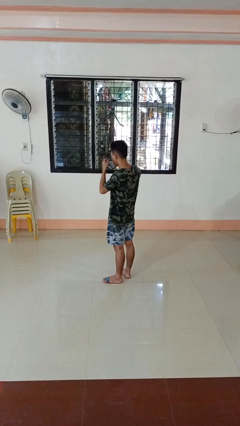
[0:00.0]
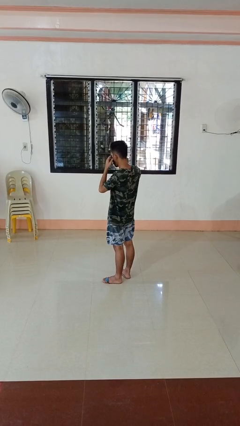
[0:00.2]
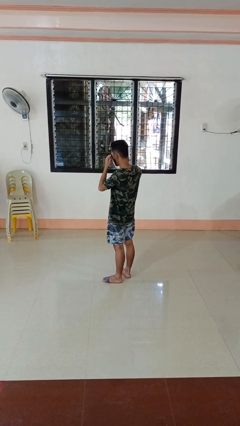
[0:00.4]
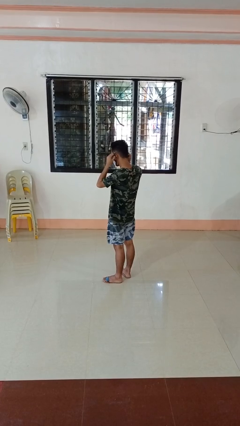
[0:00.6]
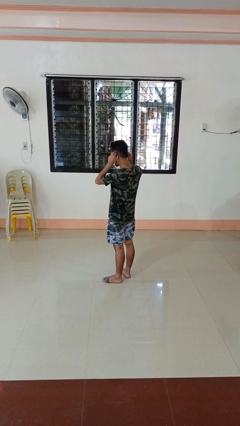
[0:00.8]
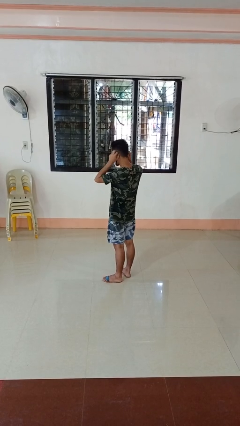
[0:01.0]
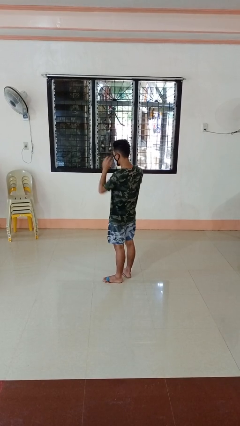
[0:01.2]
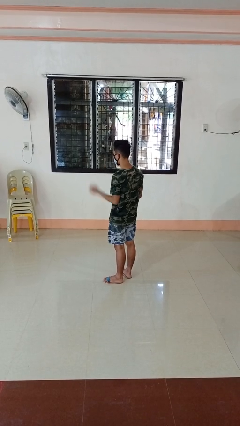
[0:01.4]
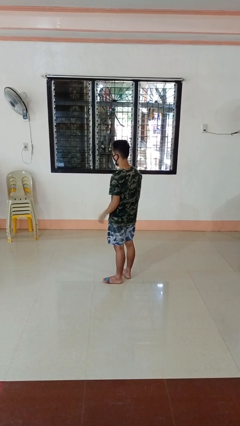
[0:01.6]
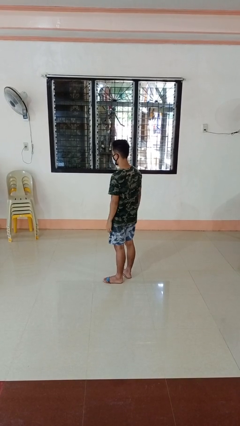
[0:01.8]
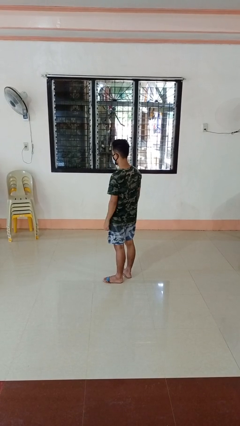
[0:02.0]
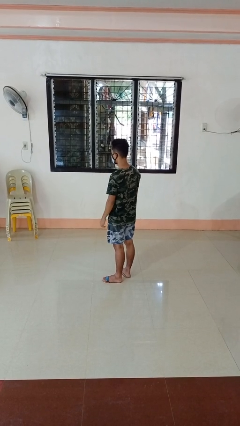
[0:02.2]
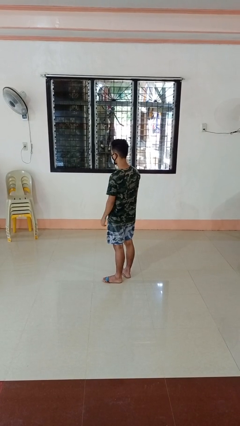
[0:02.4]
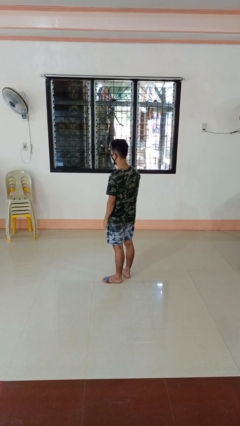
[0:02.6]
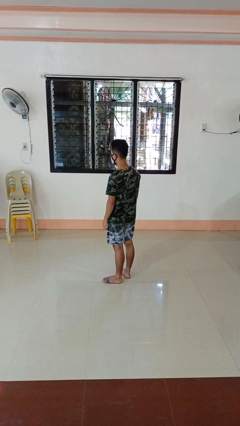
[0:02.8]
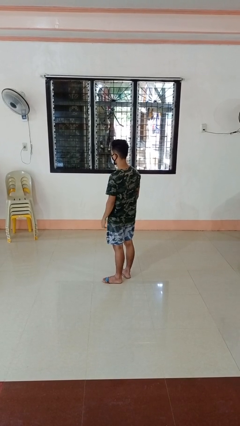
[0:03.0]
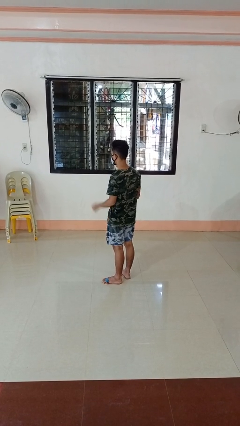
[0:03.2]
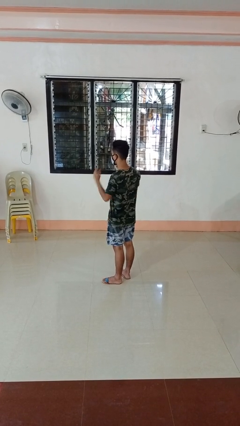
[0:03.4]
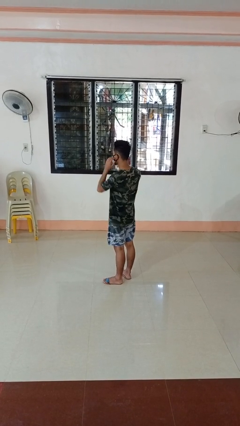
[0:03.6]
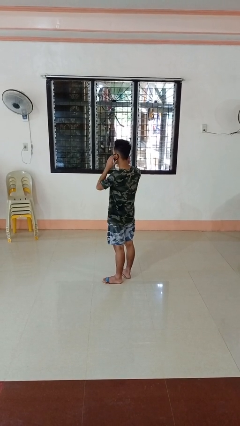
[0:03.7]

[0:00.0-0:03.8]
person puts on facemask

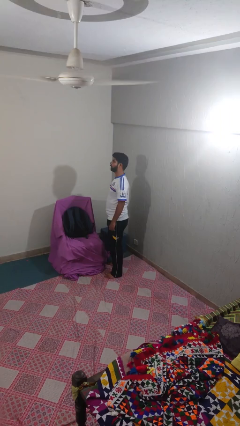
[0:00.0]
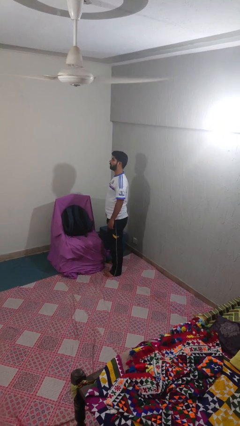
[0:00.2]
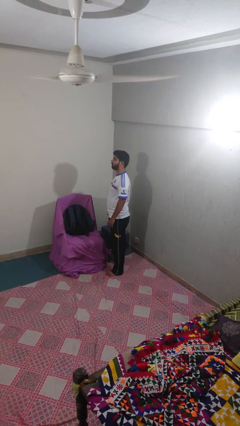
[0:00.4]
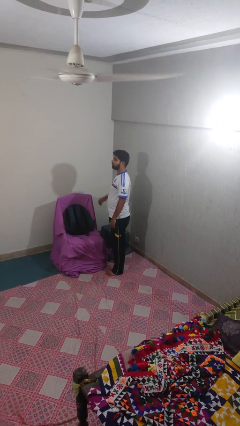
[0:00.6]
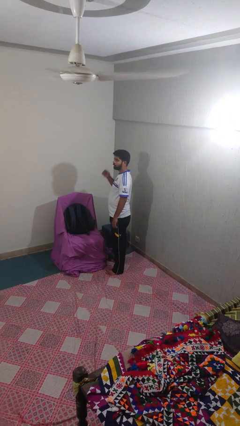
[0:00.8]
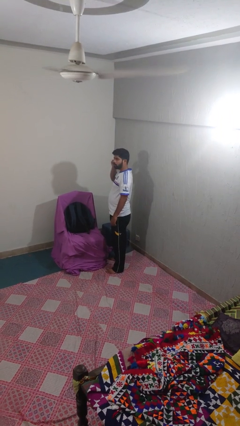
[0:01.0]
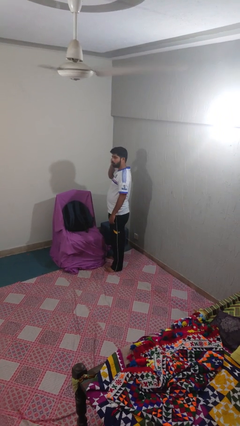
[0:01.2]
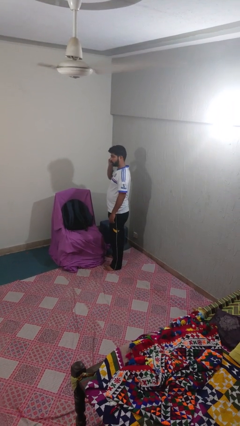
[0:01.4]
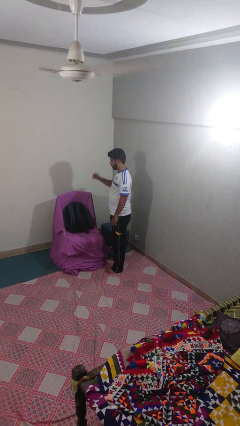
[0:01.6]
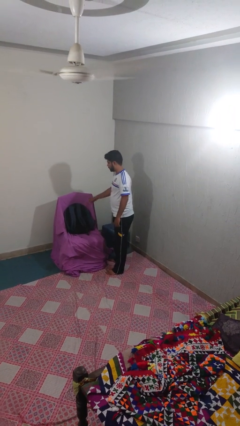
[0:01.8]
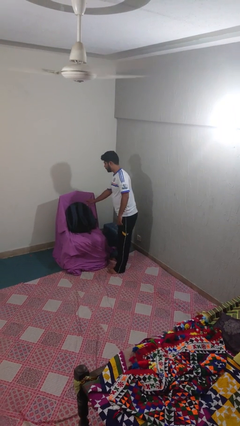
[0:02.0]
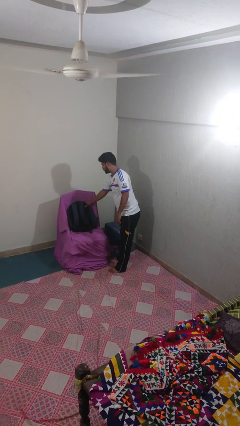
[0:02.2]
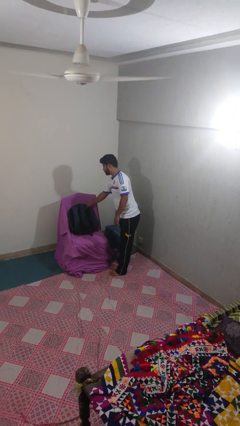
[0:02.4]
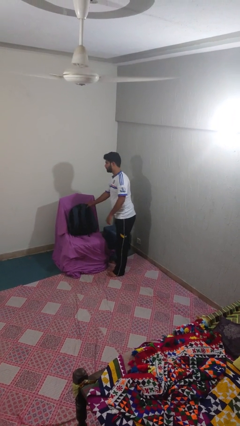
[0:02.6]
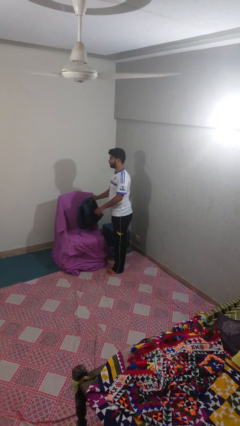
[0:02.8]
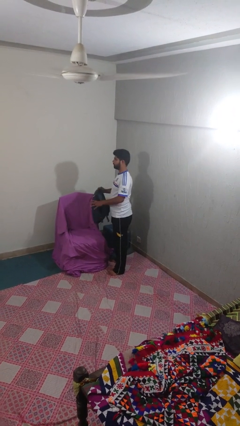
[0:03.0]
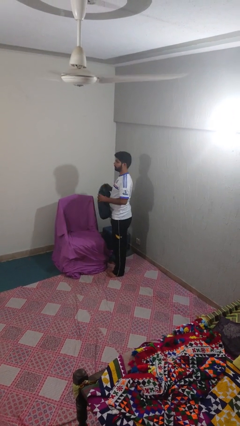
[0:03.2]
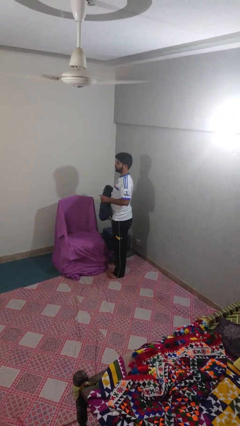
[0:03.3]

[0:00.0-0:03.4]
person picks up object from couch

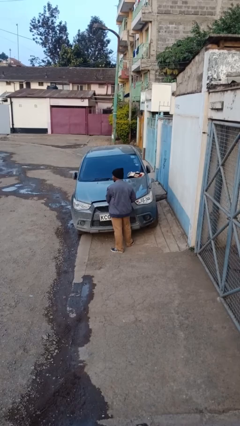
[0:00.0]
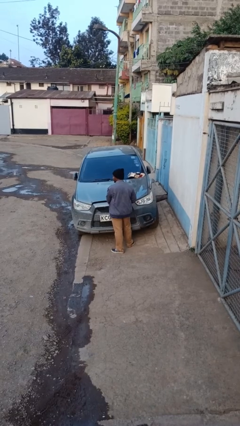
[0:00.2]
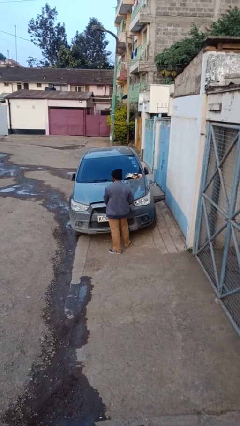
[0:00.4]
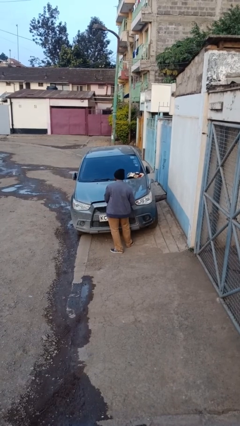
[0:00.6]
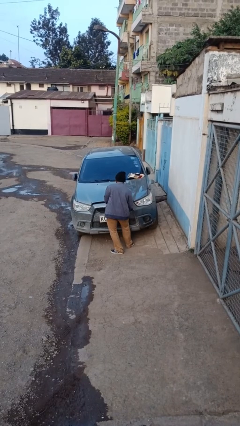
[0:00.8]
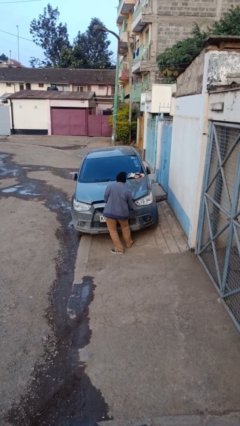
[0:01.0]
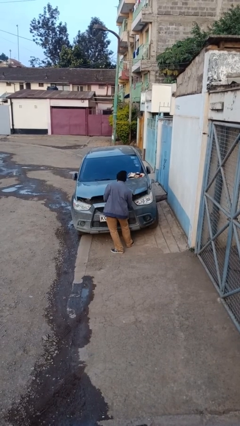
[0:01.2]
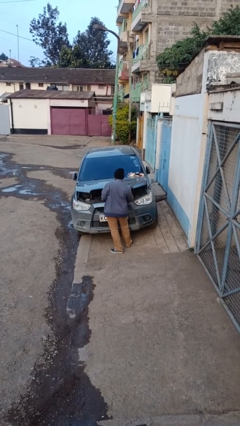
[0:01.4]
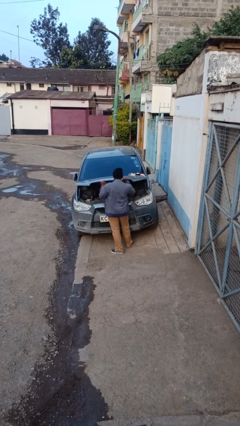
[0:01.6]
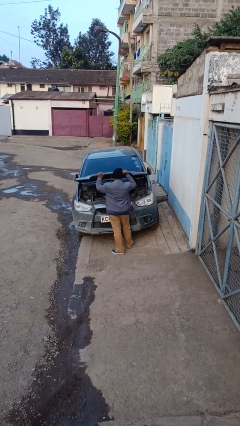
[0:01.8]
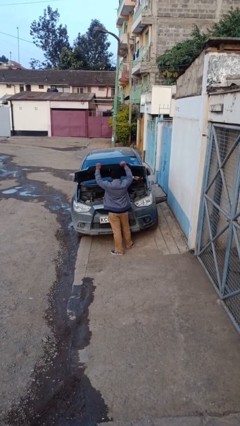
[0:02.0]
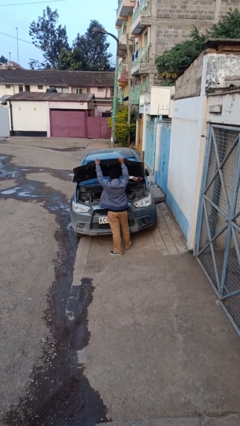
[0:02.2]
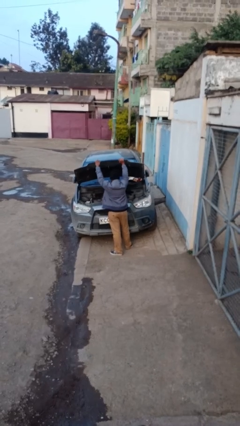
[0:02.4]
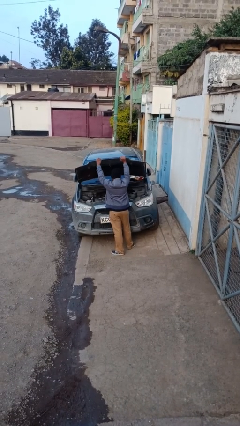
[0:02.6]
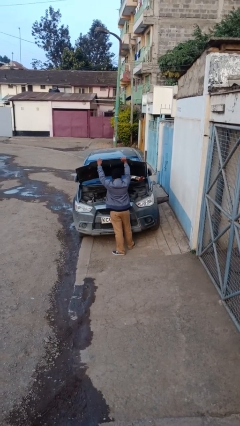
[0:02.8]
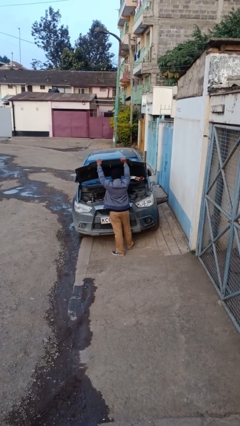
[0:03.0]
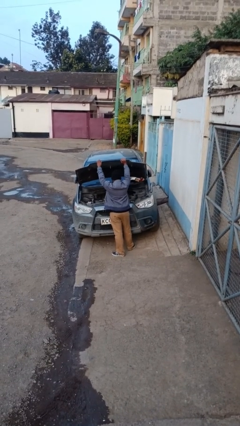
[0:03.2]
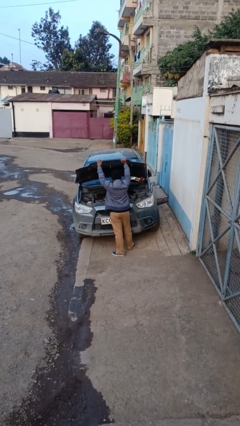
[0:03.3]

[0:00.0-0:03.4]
person opens car hood

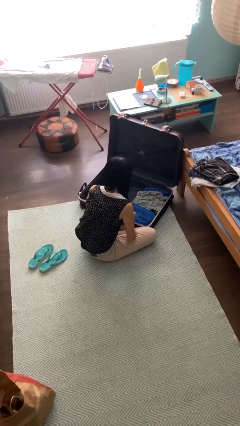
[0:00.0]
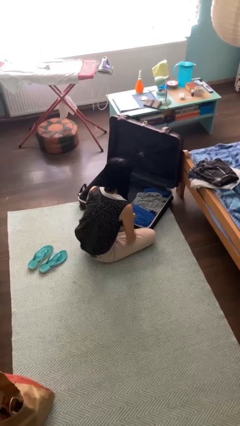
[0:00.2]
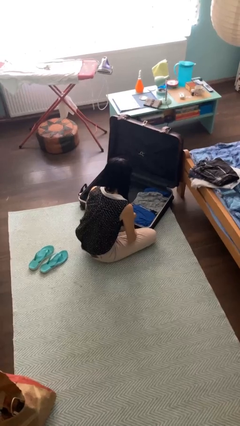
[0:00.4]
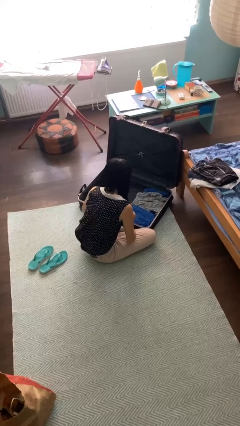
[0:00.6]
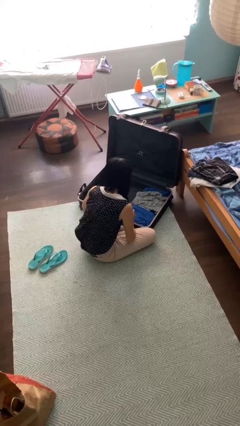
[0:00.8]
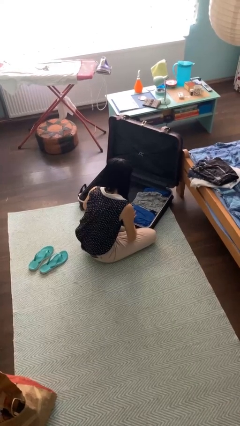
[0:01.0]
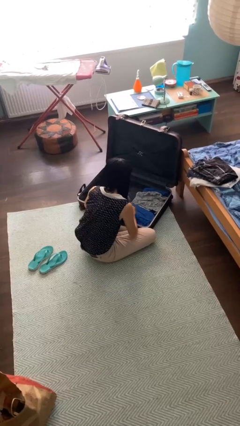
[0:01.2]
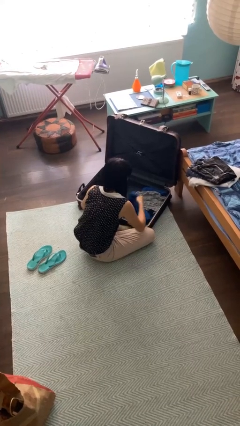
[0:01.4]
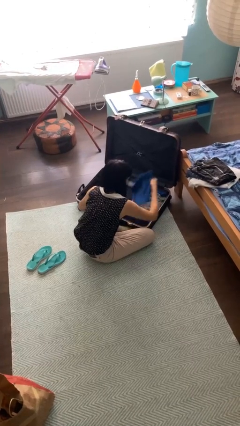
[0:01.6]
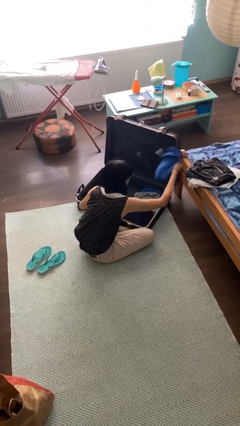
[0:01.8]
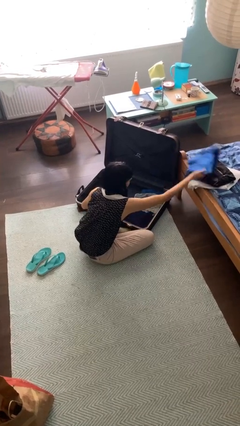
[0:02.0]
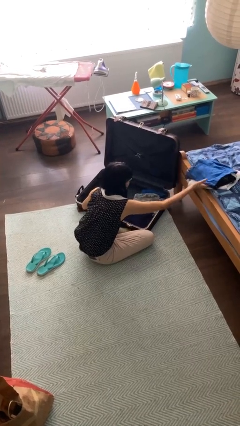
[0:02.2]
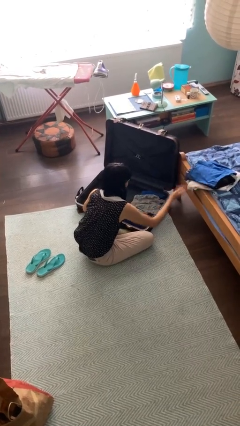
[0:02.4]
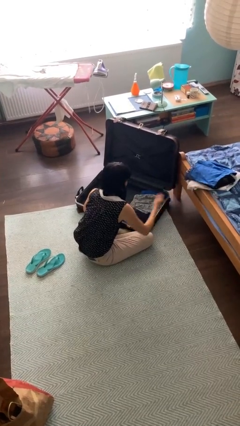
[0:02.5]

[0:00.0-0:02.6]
person unloads clothes from suitcase

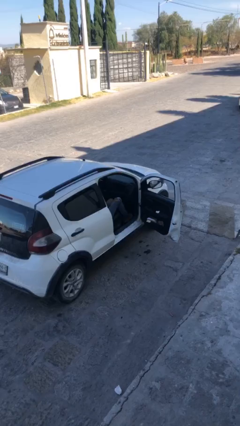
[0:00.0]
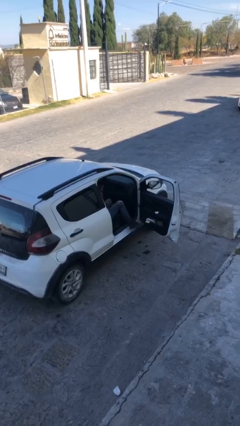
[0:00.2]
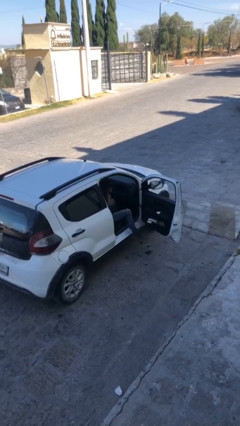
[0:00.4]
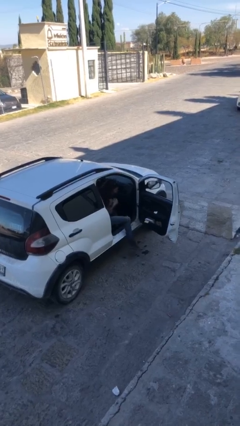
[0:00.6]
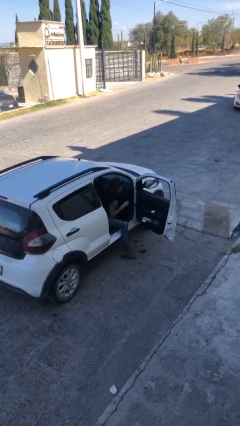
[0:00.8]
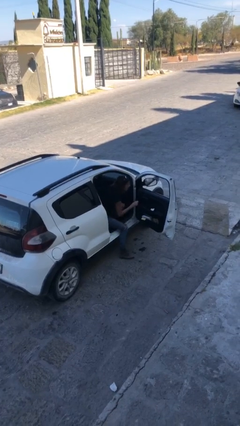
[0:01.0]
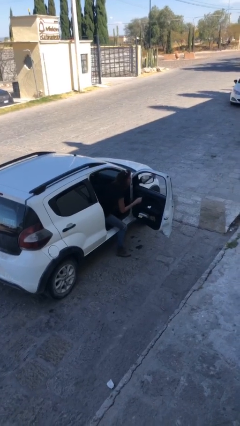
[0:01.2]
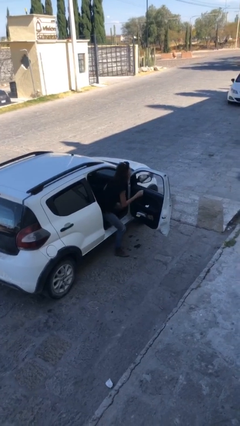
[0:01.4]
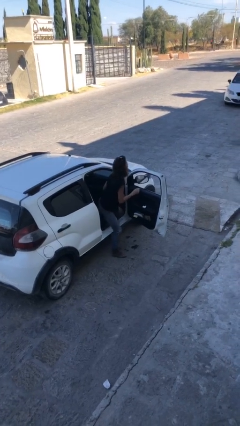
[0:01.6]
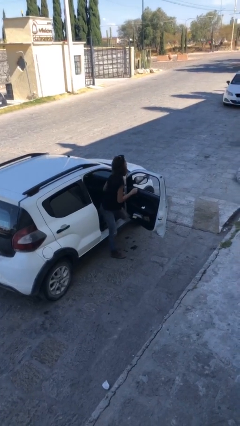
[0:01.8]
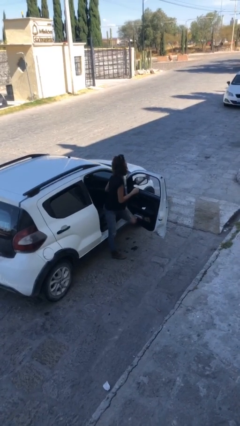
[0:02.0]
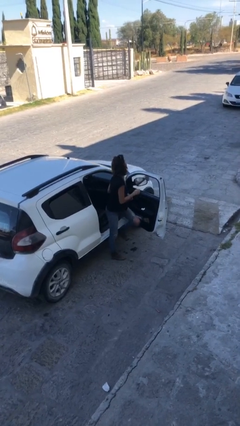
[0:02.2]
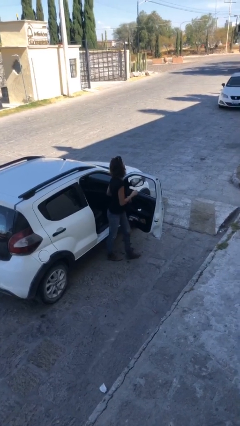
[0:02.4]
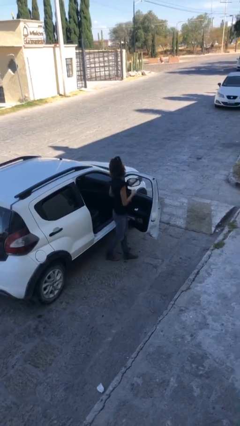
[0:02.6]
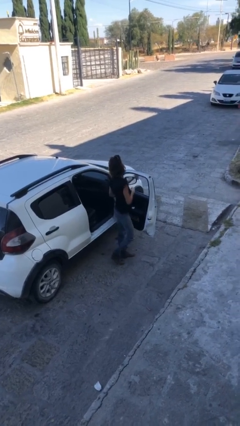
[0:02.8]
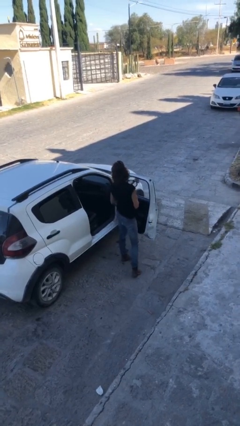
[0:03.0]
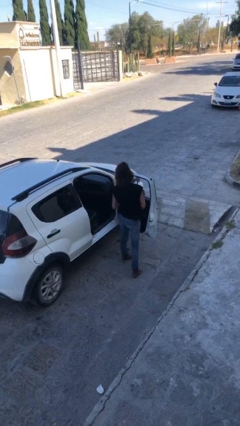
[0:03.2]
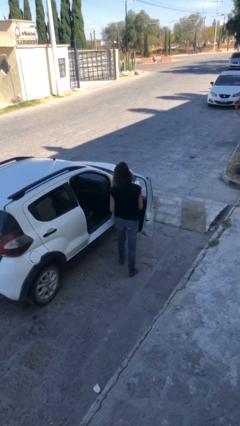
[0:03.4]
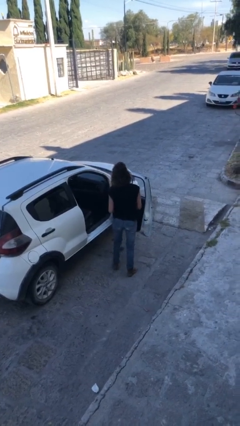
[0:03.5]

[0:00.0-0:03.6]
person exits car

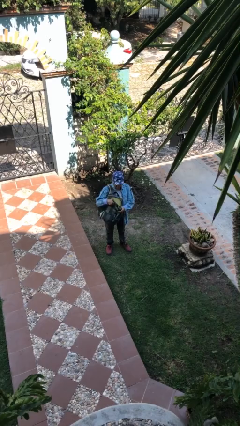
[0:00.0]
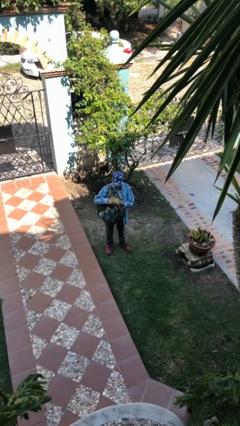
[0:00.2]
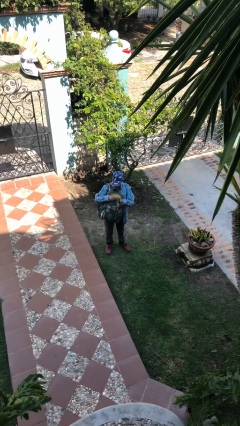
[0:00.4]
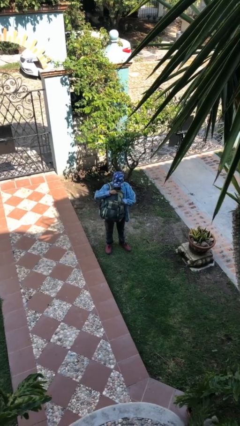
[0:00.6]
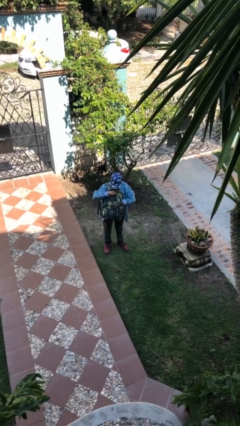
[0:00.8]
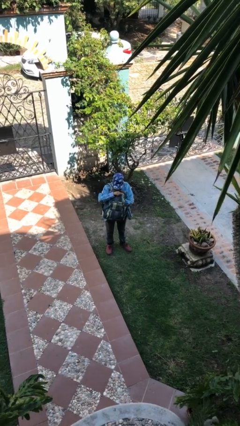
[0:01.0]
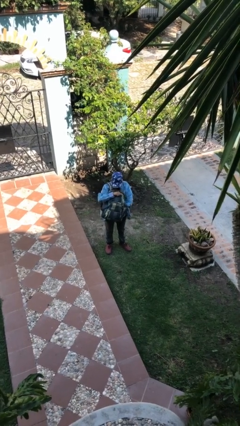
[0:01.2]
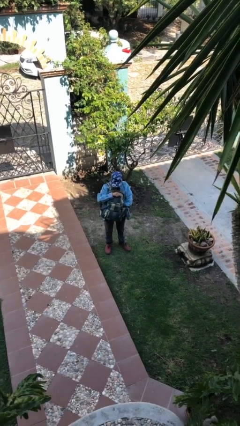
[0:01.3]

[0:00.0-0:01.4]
person searches in backpack
